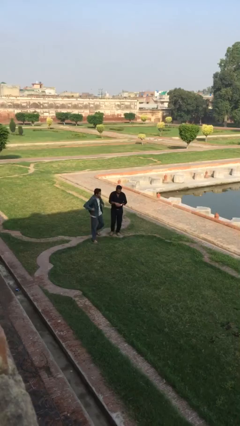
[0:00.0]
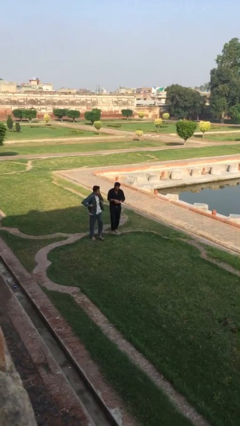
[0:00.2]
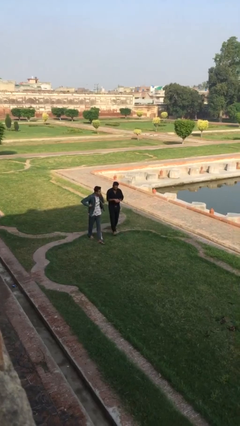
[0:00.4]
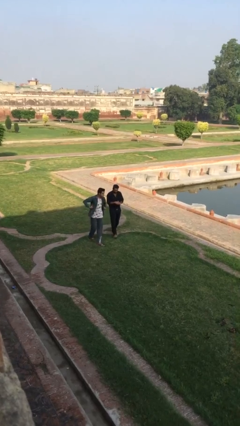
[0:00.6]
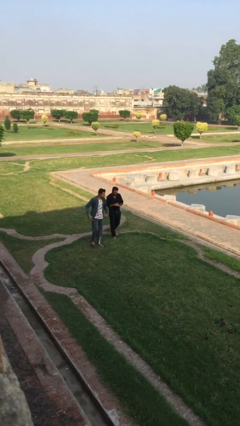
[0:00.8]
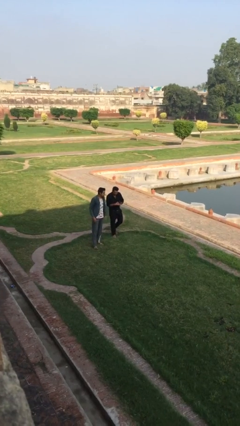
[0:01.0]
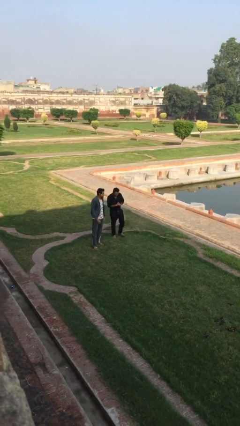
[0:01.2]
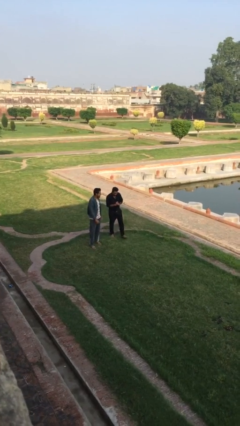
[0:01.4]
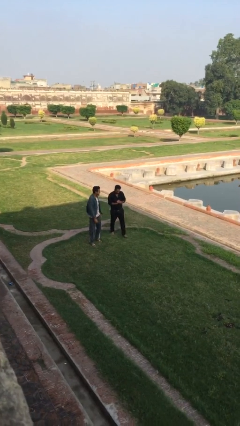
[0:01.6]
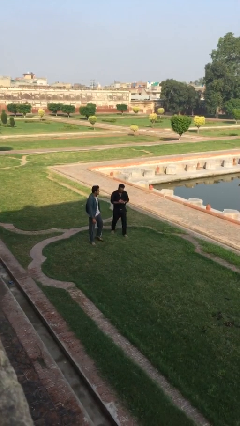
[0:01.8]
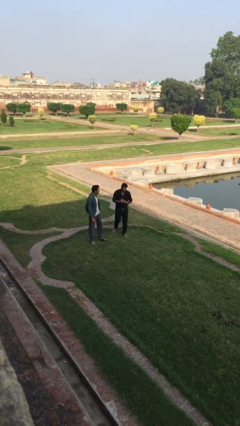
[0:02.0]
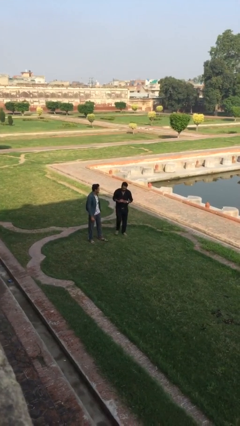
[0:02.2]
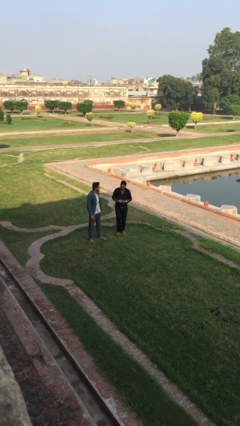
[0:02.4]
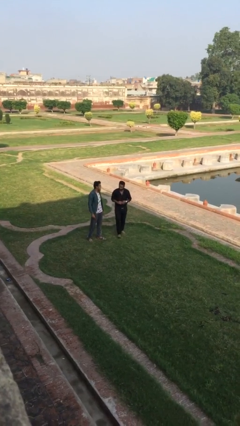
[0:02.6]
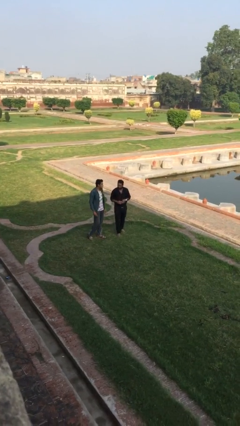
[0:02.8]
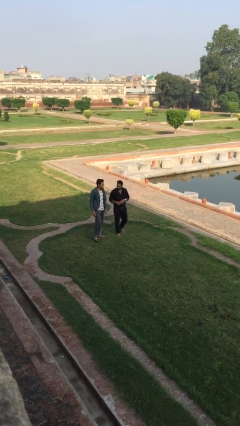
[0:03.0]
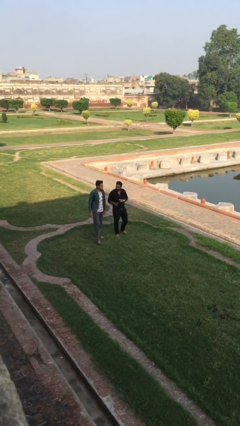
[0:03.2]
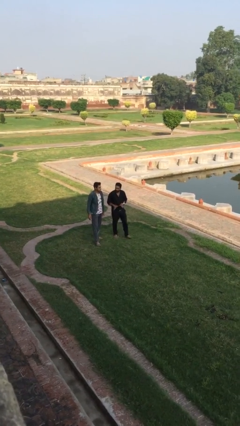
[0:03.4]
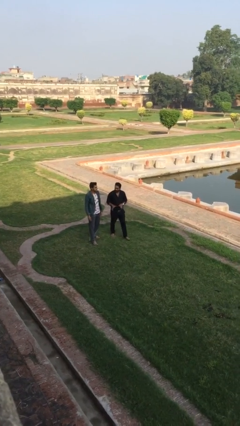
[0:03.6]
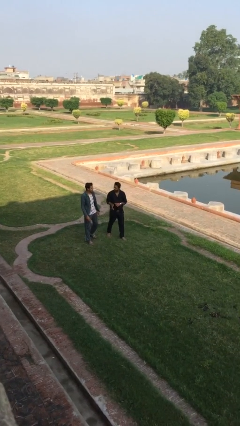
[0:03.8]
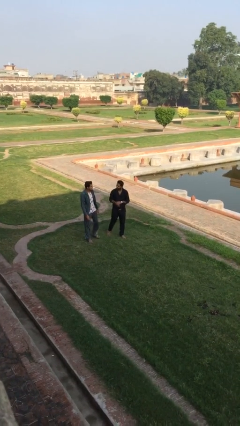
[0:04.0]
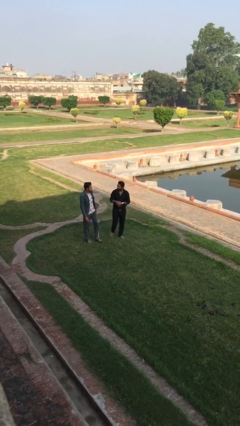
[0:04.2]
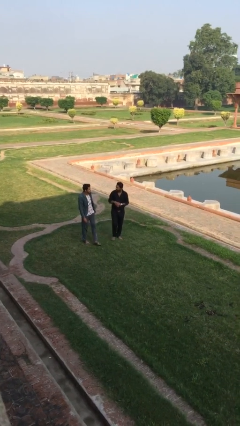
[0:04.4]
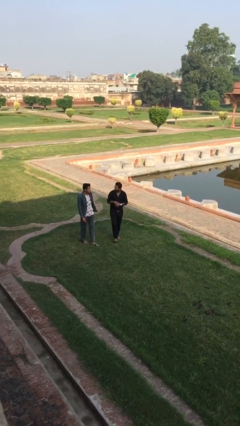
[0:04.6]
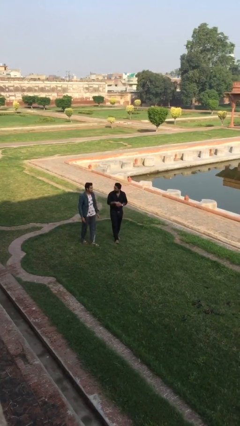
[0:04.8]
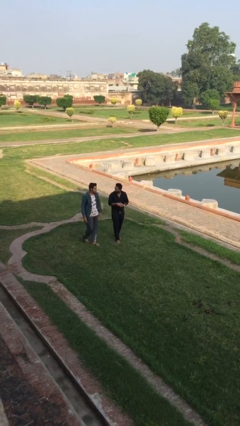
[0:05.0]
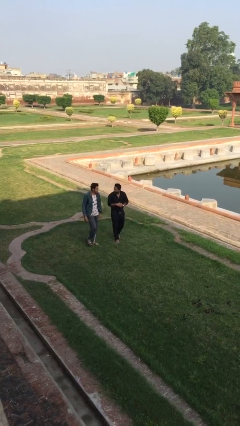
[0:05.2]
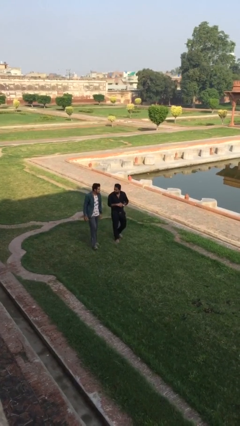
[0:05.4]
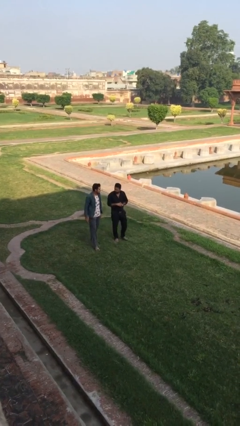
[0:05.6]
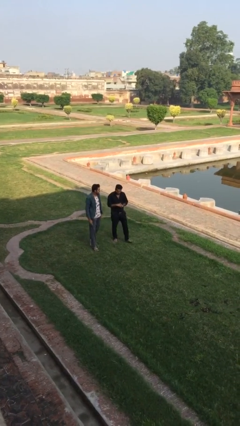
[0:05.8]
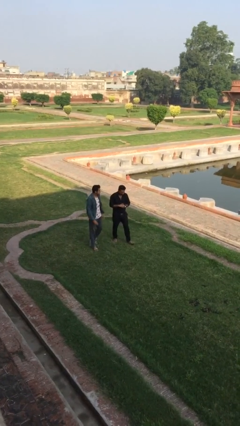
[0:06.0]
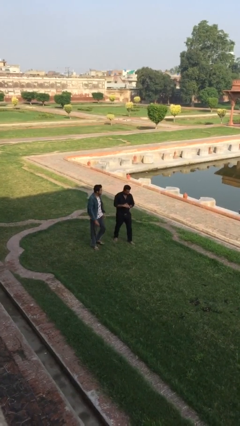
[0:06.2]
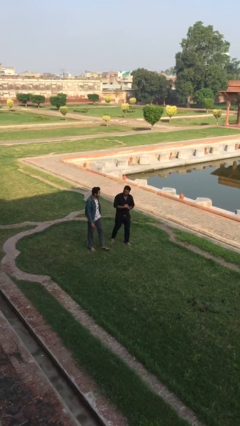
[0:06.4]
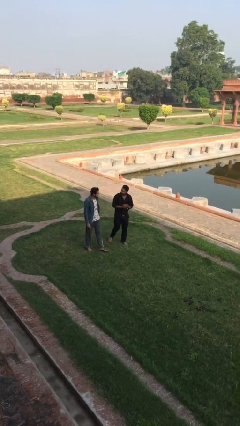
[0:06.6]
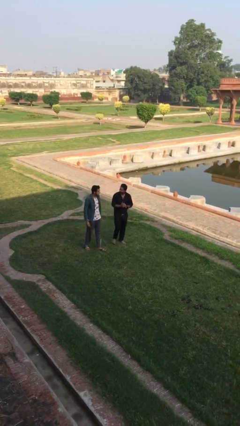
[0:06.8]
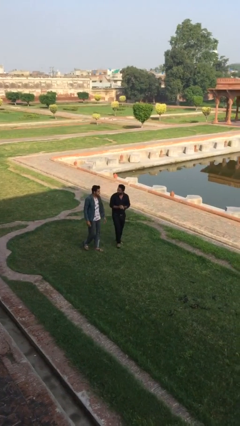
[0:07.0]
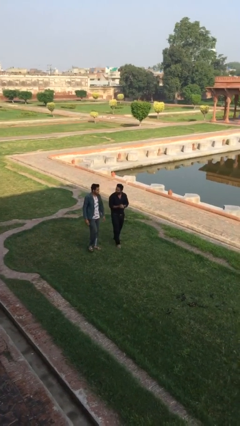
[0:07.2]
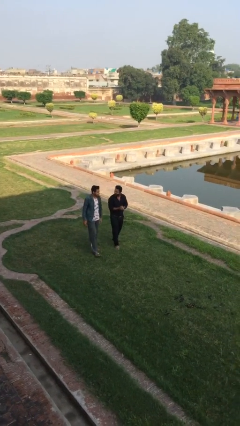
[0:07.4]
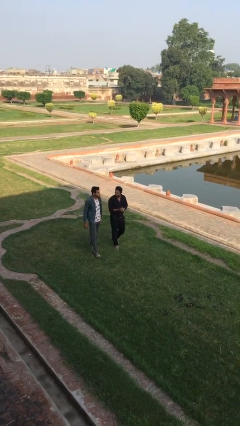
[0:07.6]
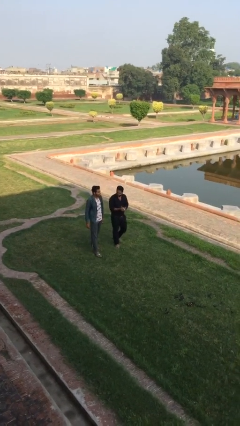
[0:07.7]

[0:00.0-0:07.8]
person talks to person

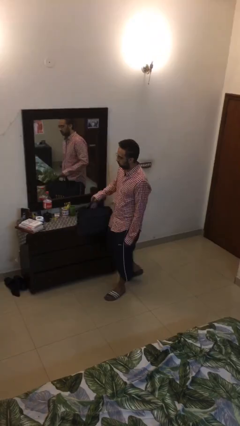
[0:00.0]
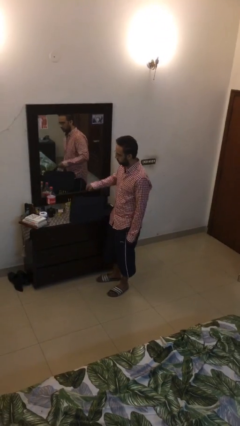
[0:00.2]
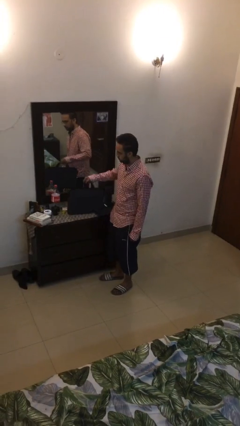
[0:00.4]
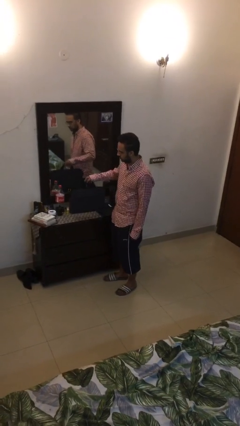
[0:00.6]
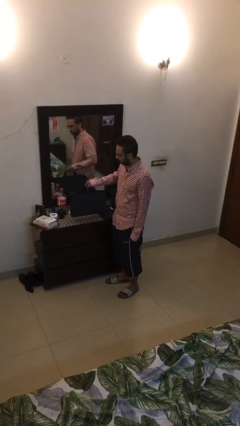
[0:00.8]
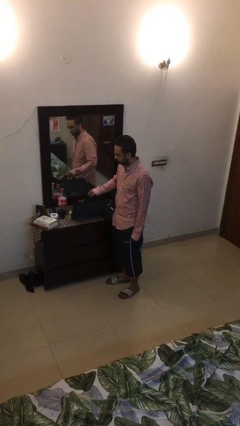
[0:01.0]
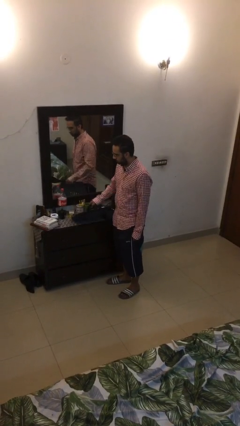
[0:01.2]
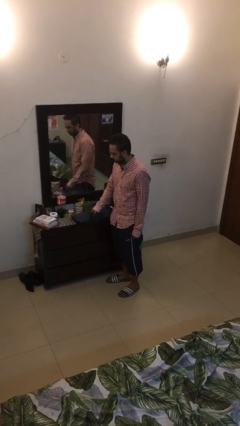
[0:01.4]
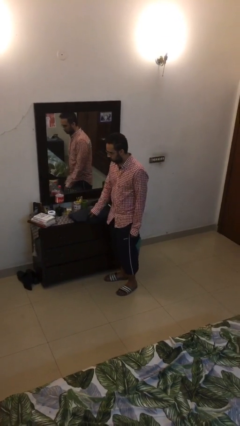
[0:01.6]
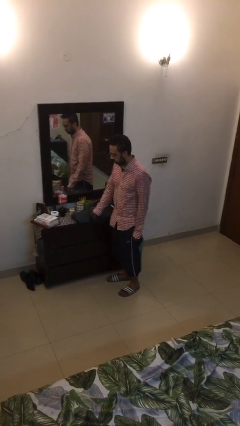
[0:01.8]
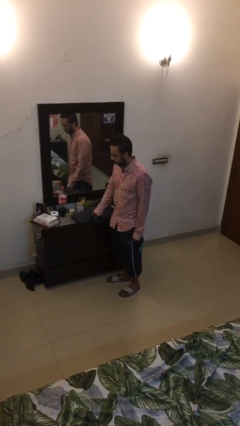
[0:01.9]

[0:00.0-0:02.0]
person puts down object on table

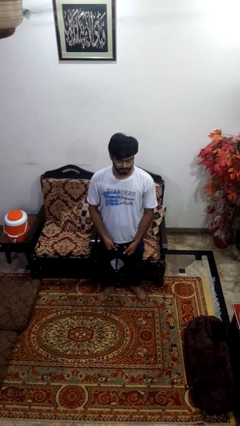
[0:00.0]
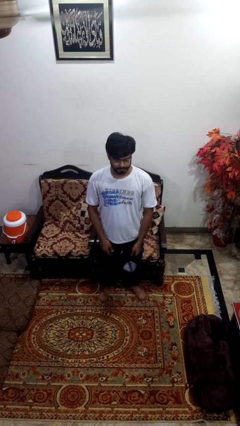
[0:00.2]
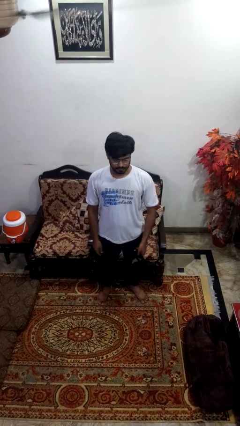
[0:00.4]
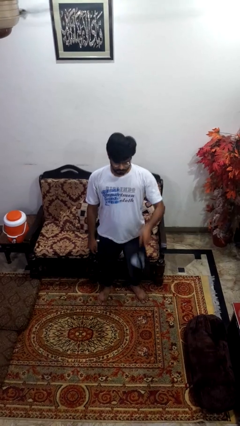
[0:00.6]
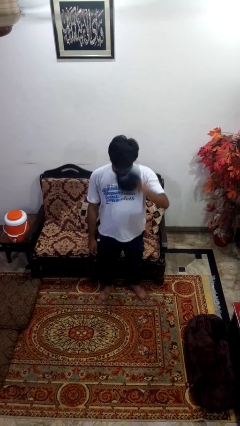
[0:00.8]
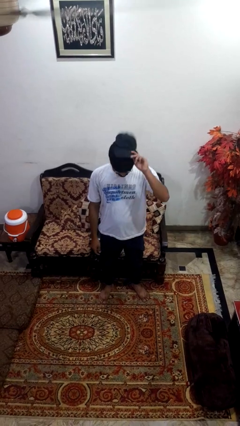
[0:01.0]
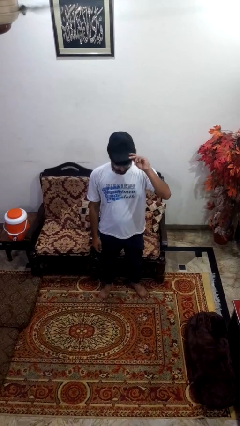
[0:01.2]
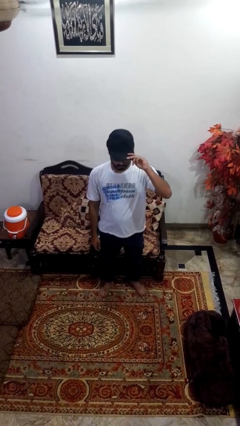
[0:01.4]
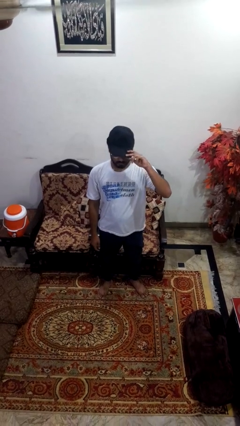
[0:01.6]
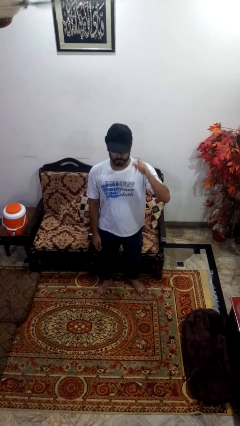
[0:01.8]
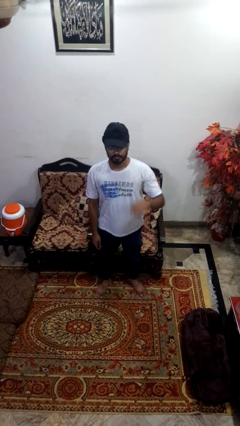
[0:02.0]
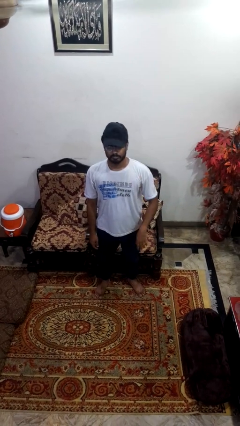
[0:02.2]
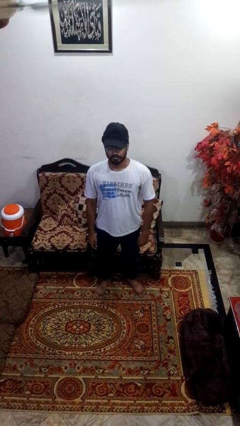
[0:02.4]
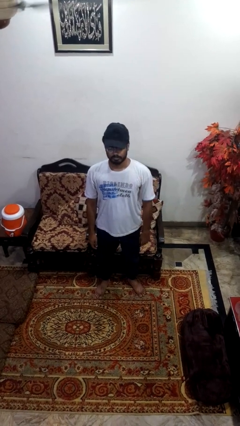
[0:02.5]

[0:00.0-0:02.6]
person puts on hat

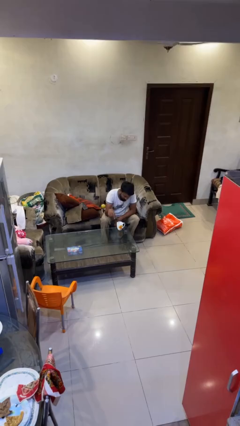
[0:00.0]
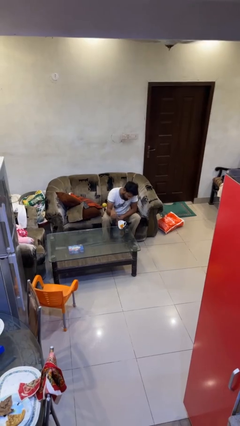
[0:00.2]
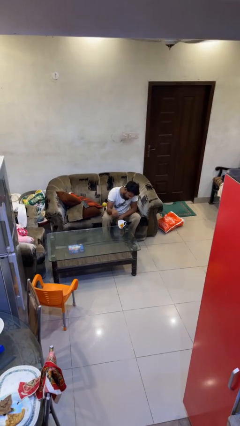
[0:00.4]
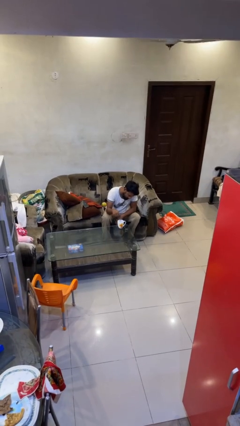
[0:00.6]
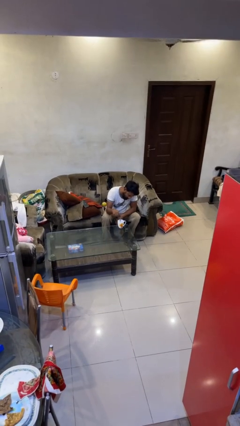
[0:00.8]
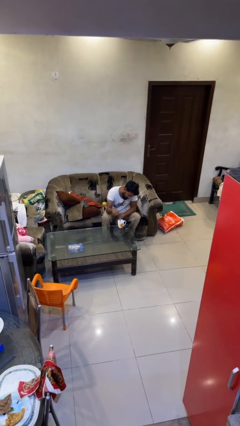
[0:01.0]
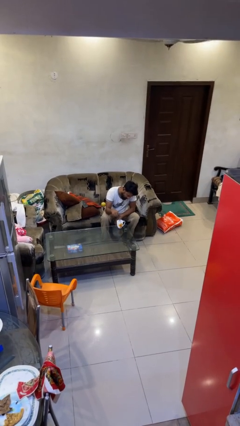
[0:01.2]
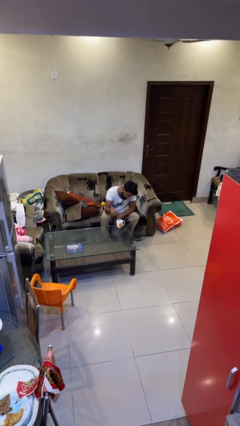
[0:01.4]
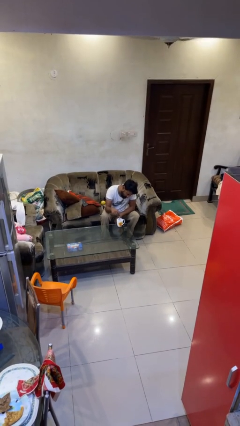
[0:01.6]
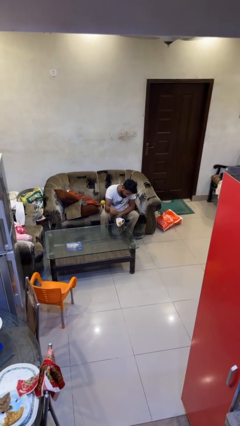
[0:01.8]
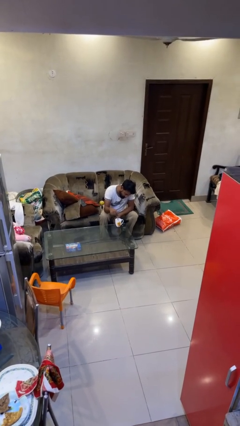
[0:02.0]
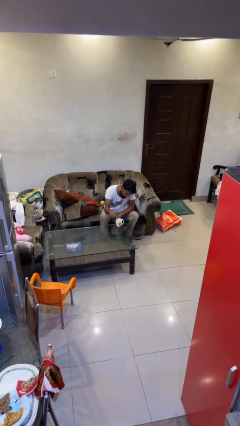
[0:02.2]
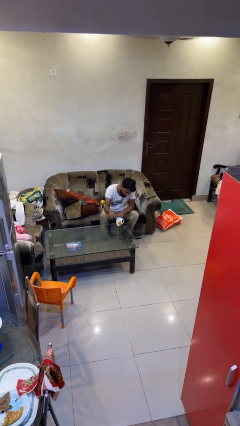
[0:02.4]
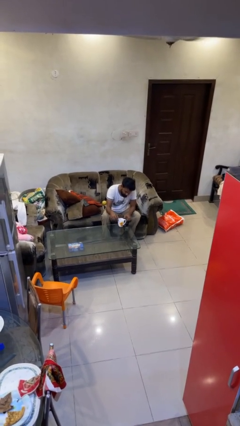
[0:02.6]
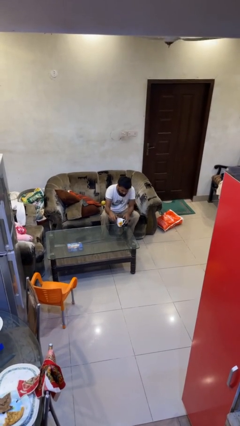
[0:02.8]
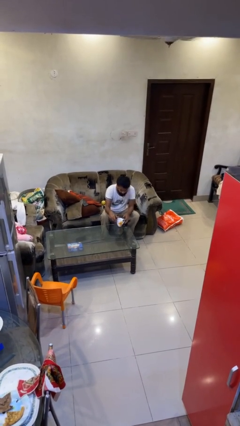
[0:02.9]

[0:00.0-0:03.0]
person stirs mug

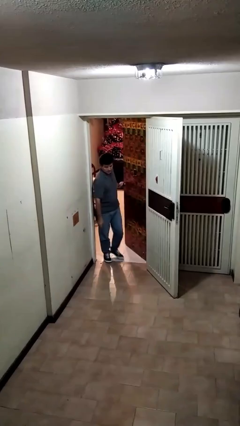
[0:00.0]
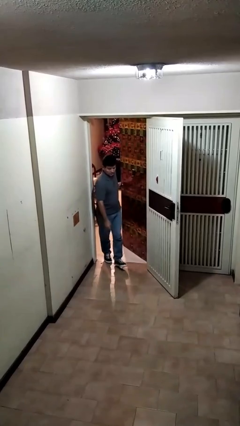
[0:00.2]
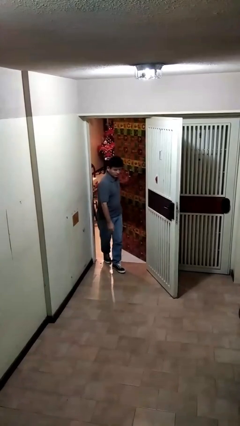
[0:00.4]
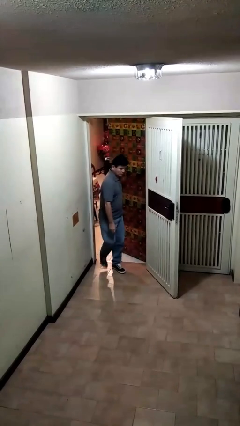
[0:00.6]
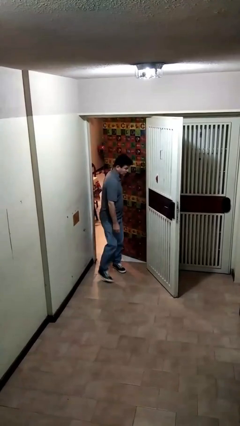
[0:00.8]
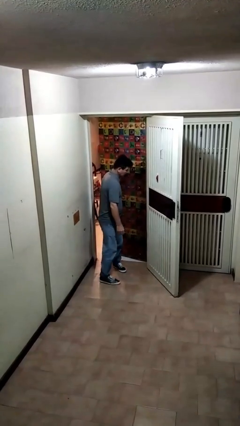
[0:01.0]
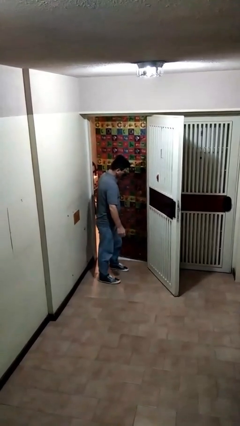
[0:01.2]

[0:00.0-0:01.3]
person closes facility door

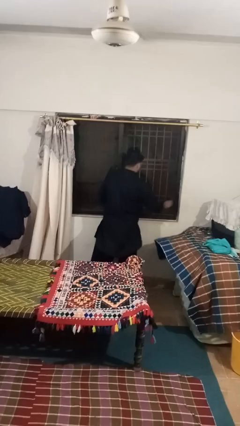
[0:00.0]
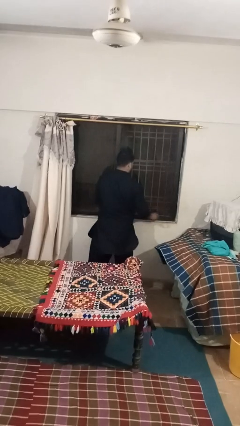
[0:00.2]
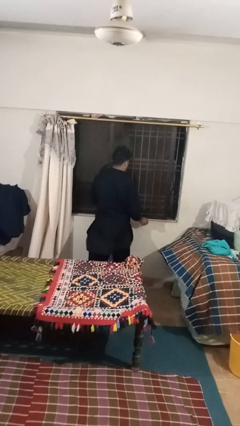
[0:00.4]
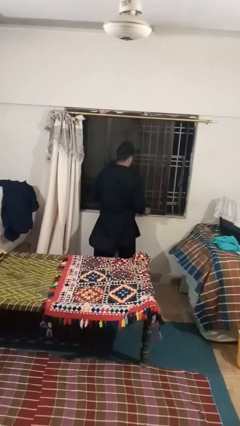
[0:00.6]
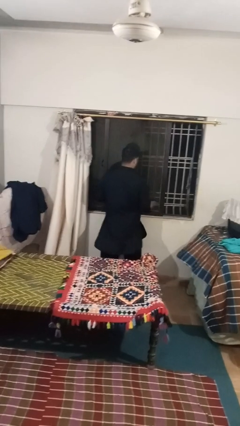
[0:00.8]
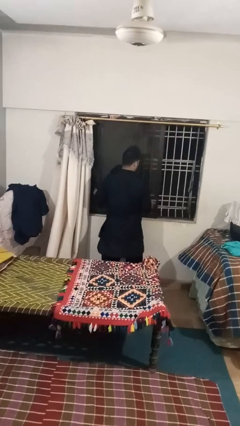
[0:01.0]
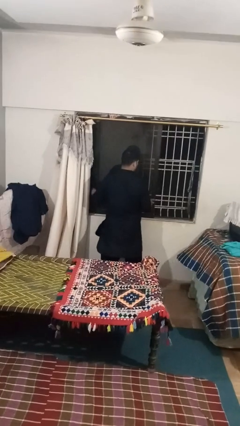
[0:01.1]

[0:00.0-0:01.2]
person opens sliding door
